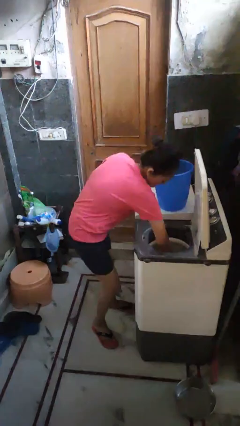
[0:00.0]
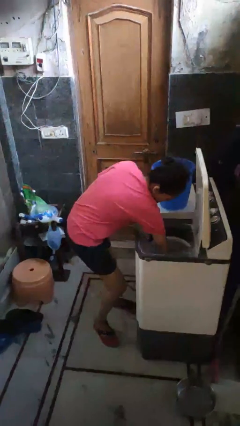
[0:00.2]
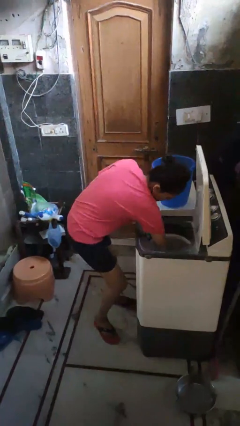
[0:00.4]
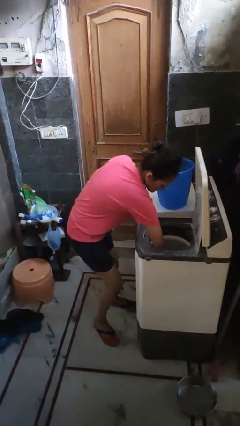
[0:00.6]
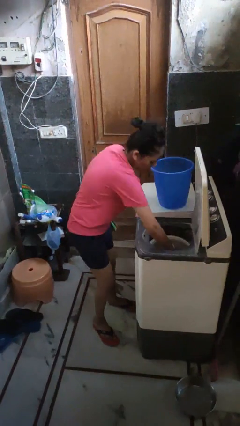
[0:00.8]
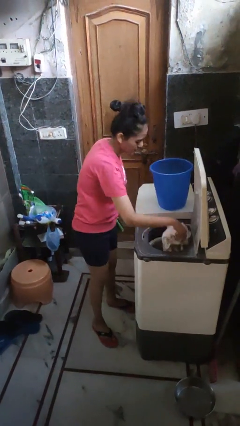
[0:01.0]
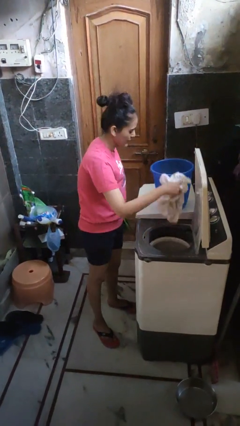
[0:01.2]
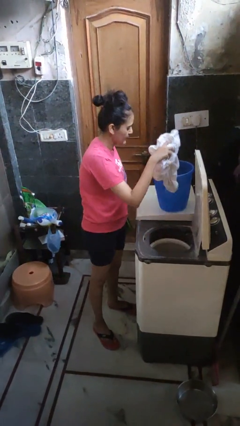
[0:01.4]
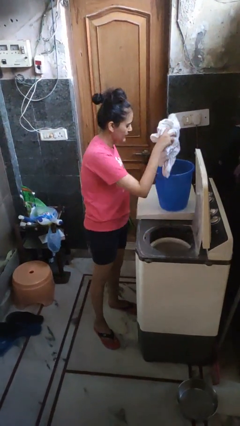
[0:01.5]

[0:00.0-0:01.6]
person takes clothes from dresser

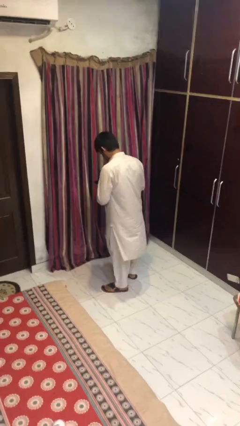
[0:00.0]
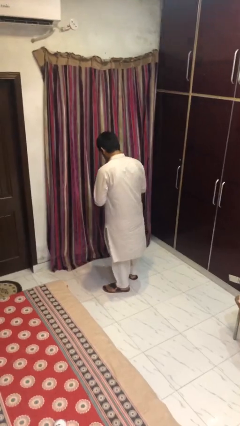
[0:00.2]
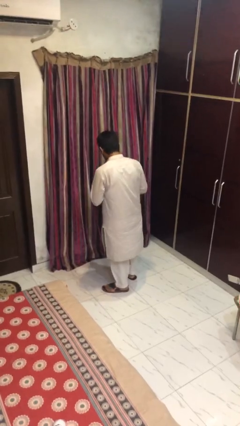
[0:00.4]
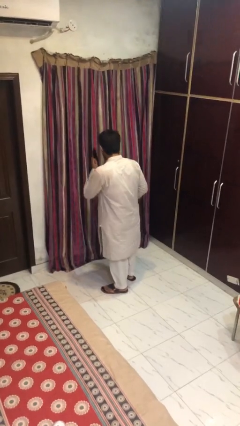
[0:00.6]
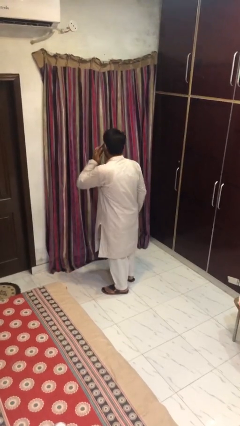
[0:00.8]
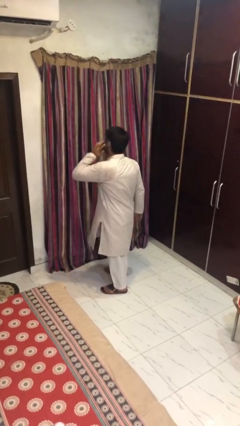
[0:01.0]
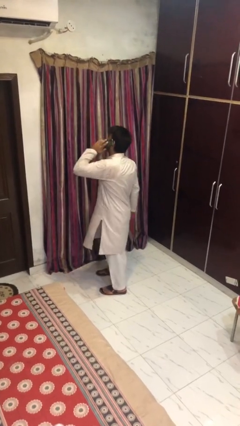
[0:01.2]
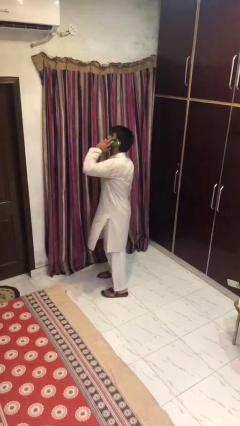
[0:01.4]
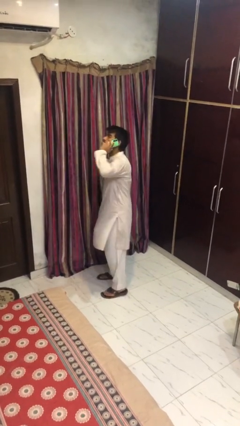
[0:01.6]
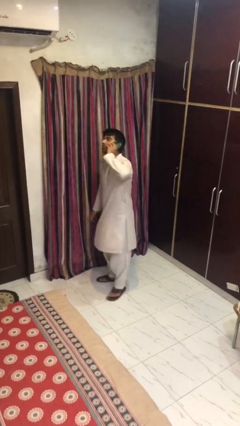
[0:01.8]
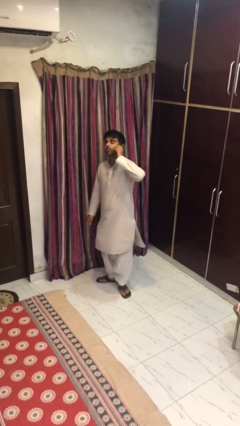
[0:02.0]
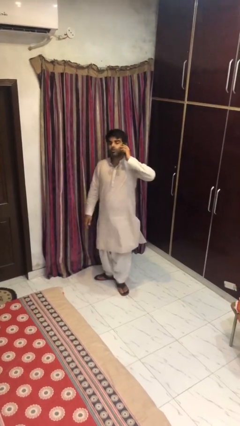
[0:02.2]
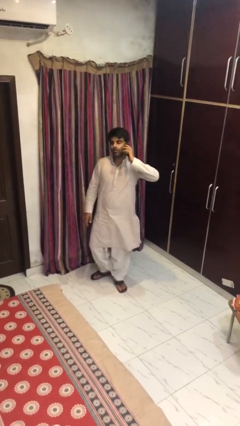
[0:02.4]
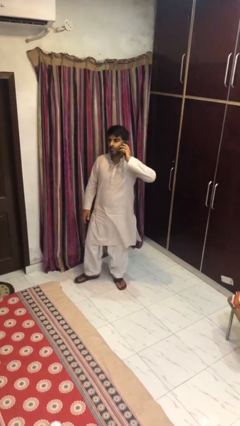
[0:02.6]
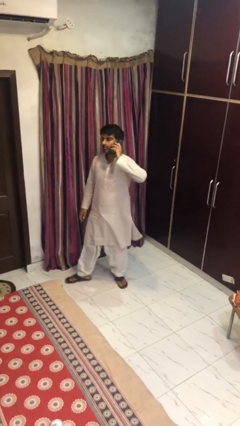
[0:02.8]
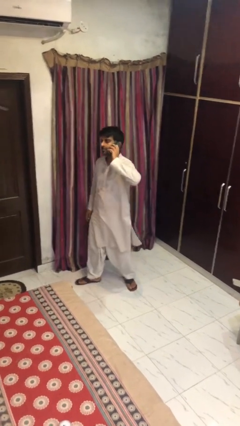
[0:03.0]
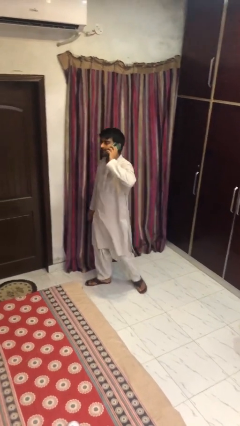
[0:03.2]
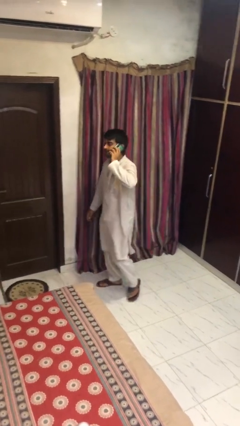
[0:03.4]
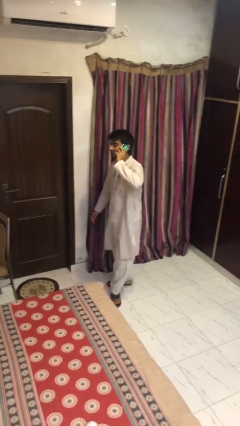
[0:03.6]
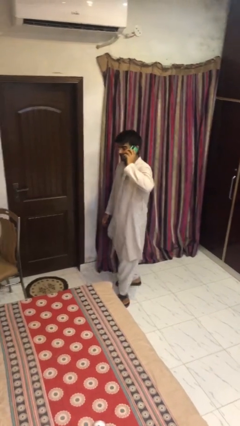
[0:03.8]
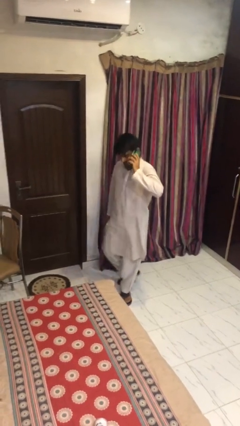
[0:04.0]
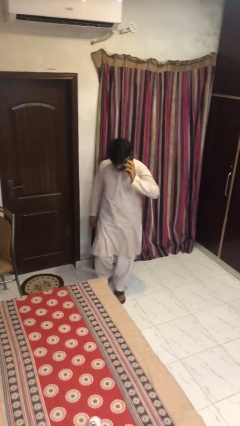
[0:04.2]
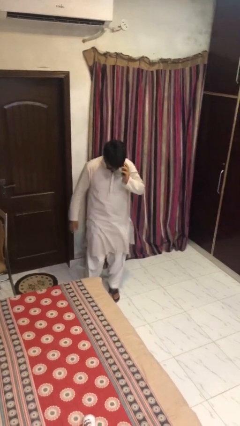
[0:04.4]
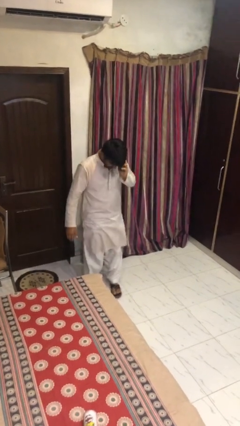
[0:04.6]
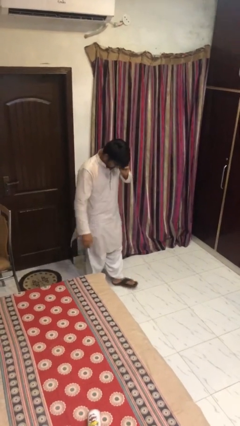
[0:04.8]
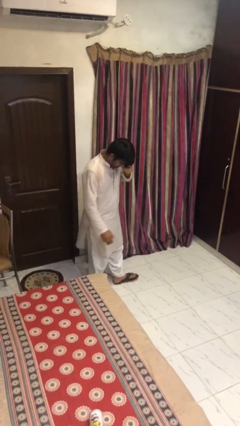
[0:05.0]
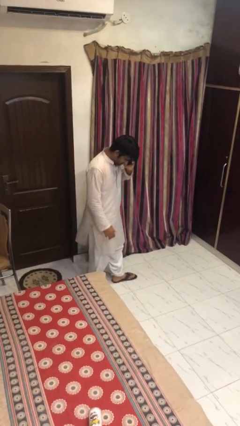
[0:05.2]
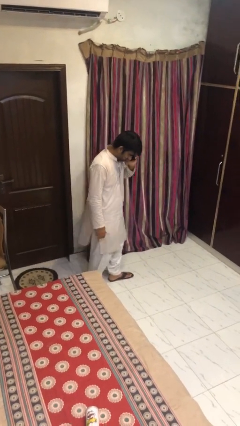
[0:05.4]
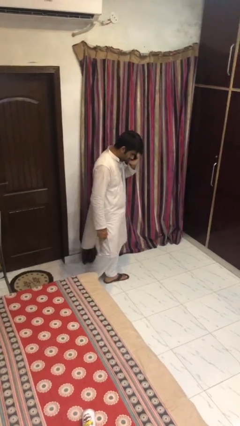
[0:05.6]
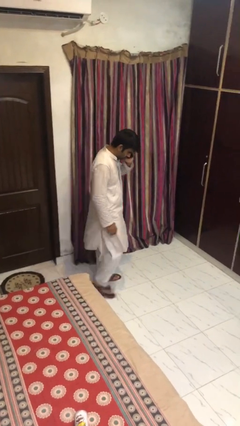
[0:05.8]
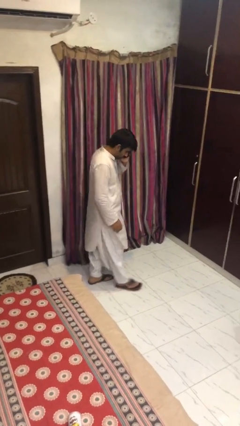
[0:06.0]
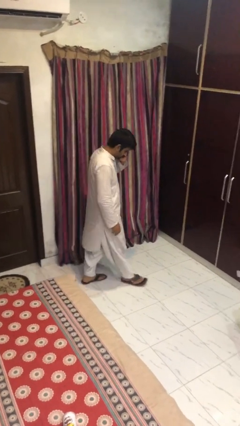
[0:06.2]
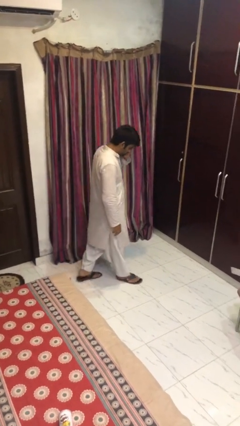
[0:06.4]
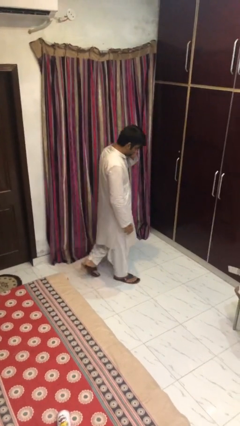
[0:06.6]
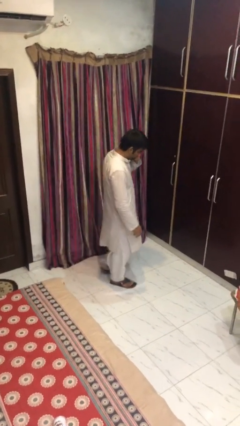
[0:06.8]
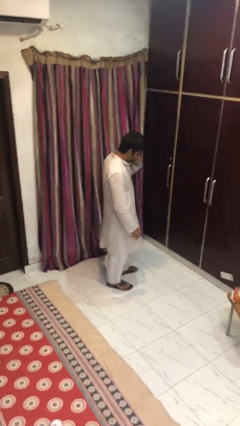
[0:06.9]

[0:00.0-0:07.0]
person talks on phone

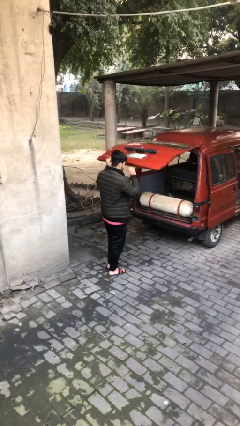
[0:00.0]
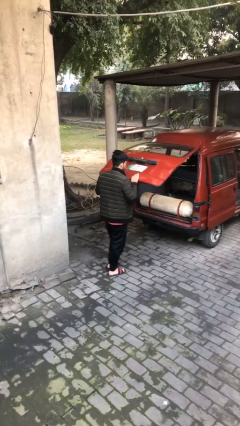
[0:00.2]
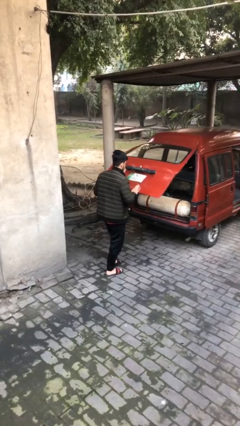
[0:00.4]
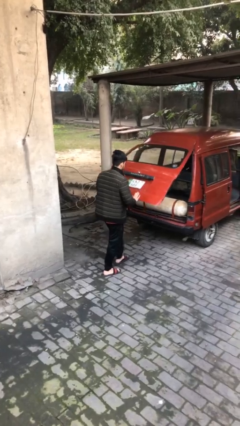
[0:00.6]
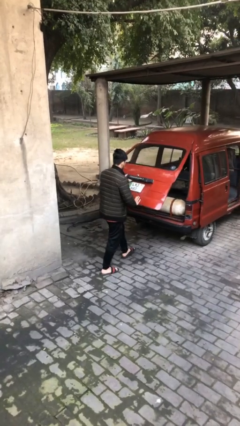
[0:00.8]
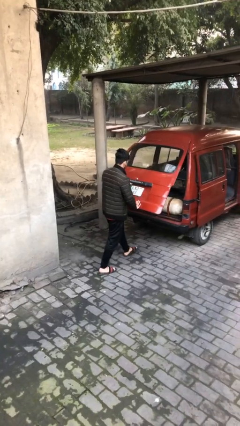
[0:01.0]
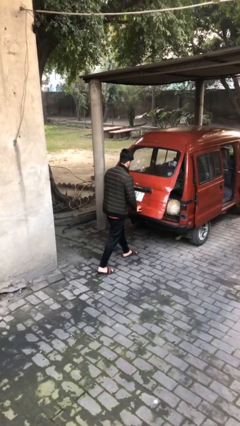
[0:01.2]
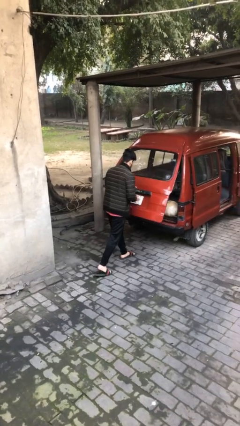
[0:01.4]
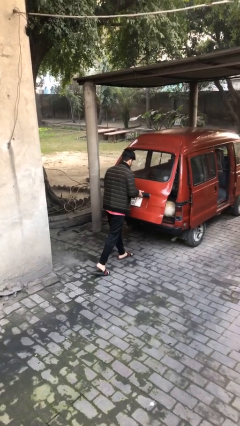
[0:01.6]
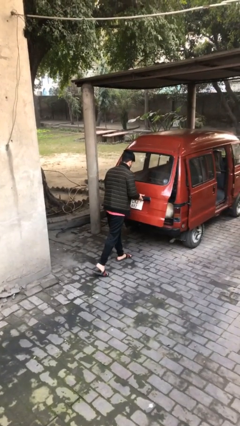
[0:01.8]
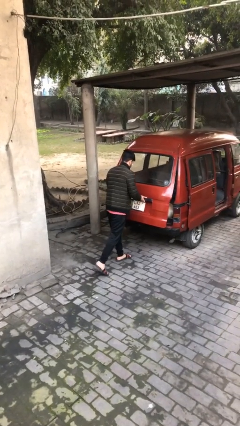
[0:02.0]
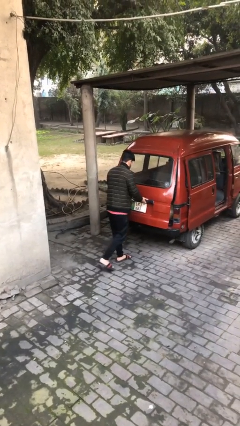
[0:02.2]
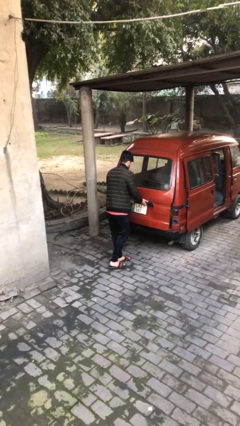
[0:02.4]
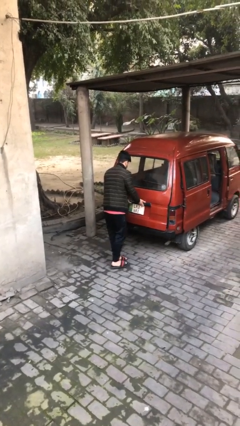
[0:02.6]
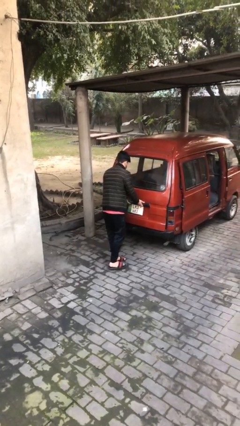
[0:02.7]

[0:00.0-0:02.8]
person closes car trunk

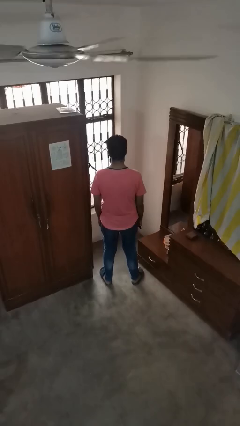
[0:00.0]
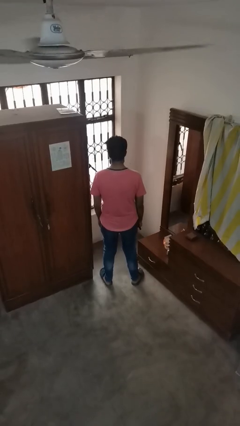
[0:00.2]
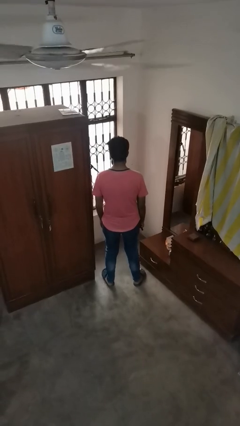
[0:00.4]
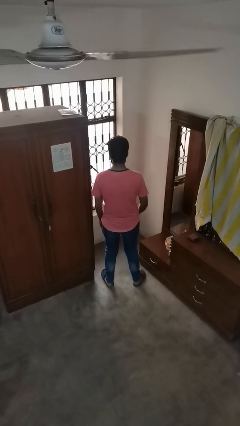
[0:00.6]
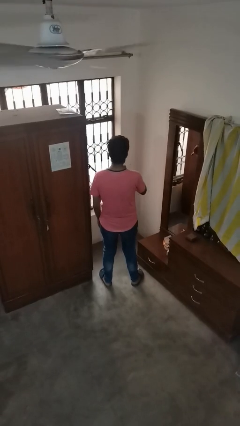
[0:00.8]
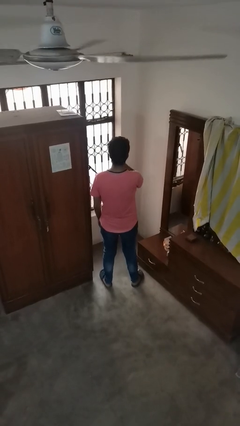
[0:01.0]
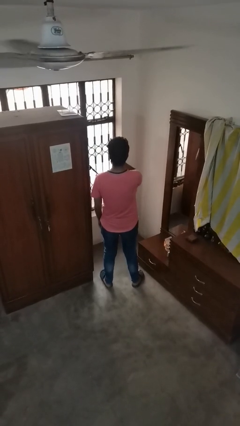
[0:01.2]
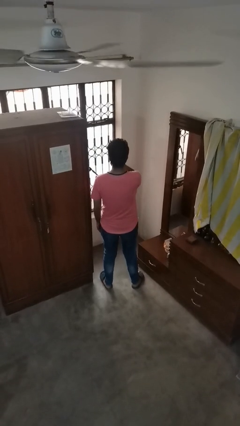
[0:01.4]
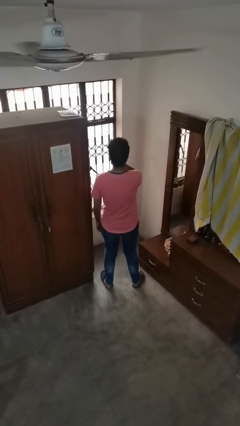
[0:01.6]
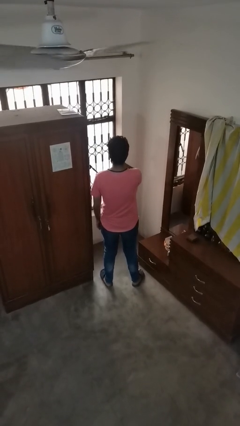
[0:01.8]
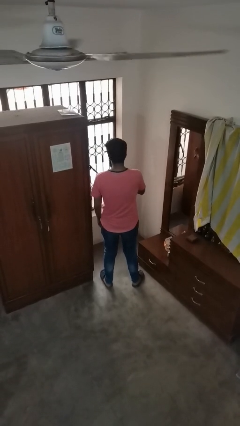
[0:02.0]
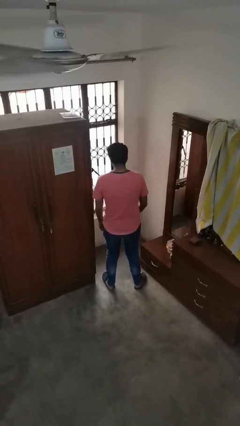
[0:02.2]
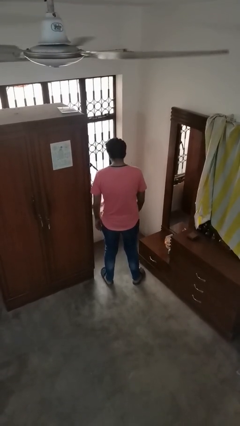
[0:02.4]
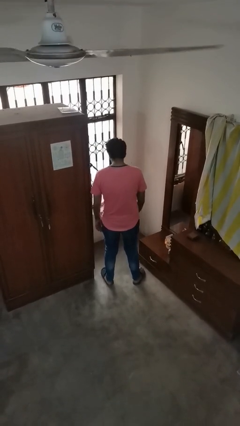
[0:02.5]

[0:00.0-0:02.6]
person vapes

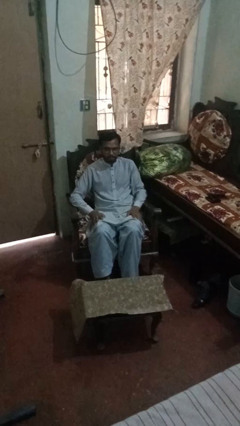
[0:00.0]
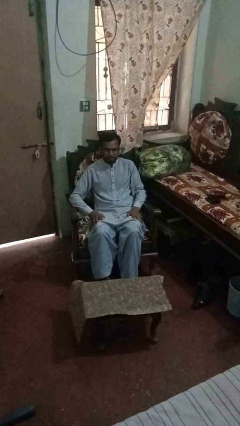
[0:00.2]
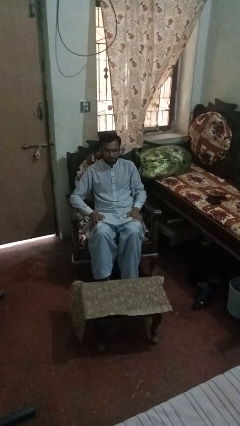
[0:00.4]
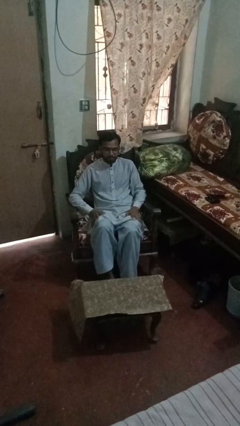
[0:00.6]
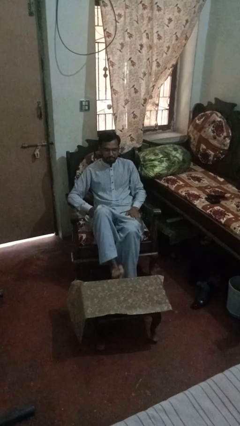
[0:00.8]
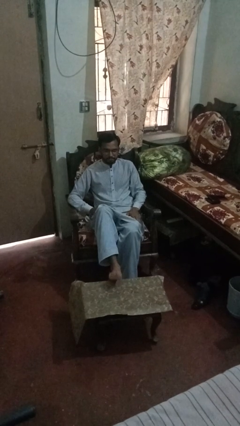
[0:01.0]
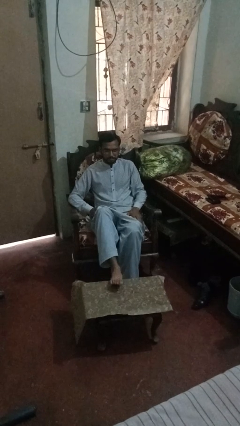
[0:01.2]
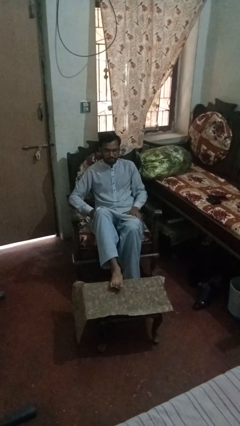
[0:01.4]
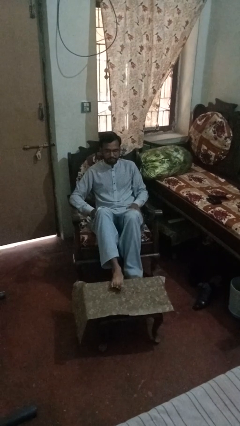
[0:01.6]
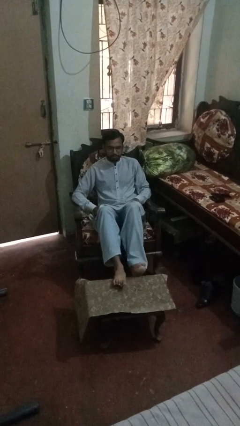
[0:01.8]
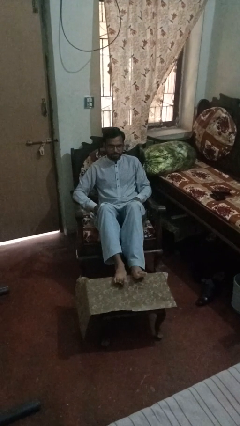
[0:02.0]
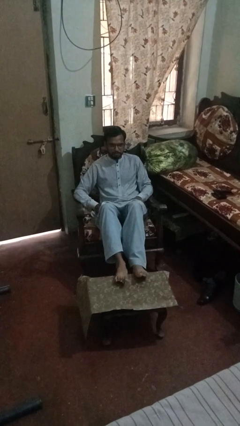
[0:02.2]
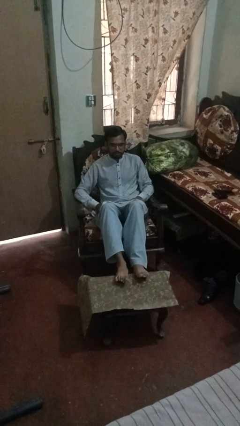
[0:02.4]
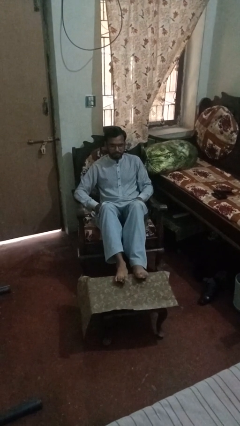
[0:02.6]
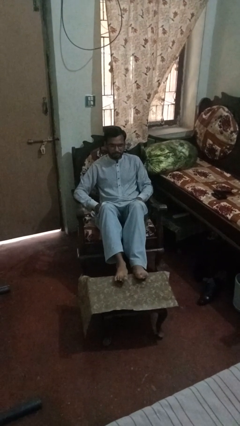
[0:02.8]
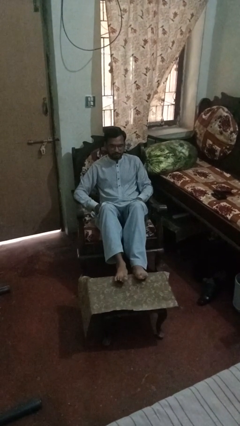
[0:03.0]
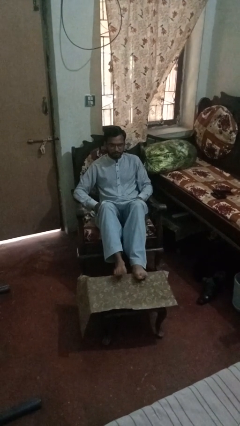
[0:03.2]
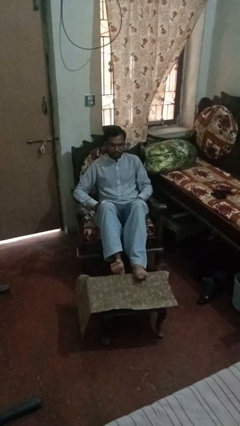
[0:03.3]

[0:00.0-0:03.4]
person puts feet up

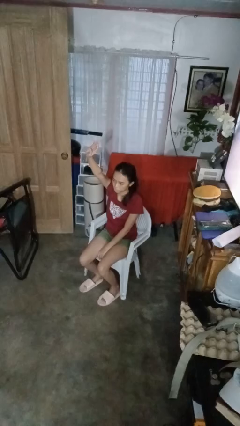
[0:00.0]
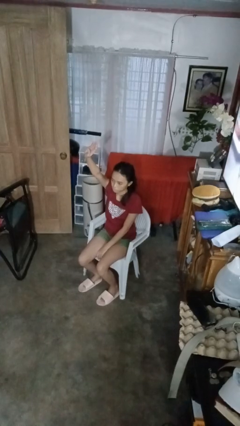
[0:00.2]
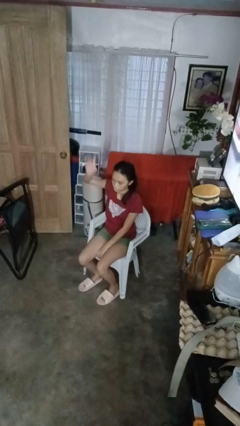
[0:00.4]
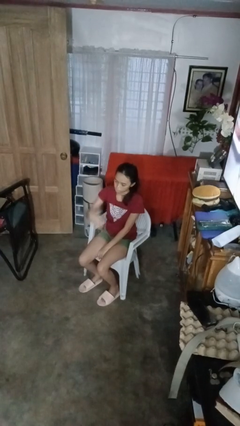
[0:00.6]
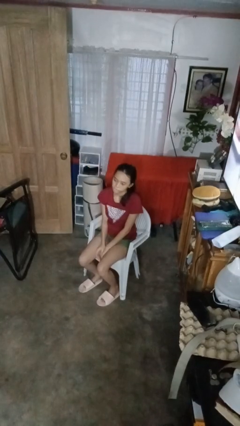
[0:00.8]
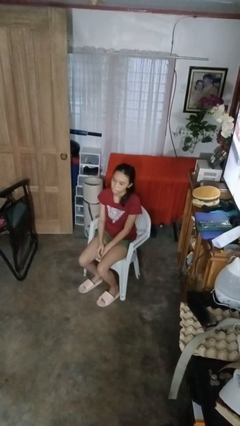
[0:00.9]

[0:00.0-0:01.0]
person gestures lower hand
